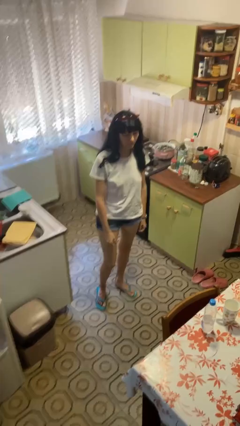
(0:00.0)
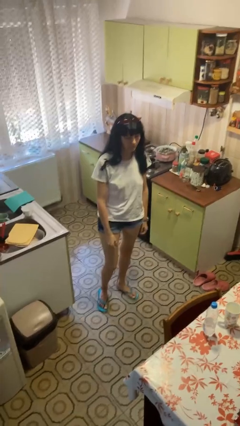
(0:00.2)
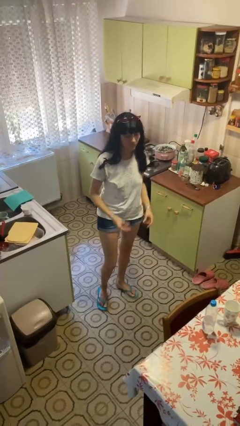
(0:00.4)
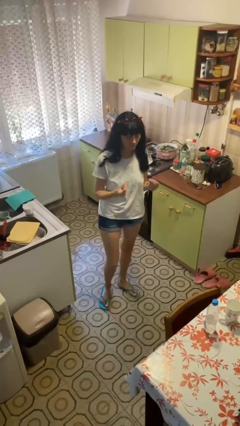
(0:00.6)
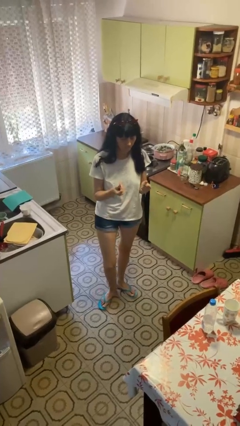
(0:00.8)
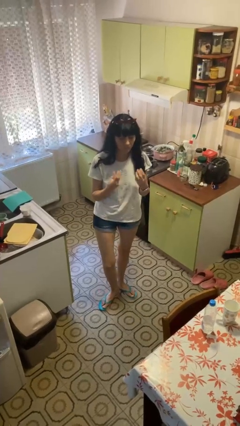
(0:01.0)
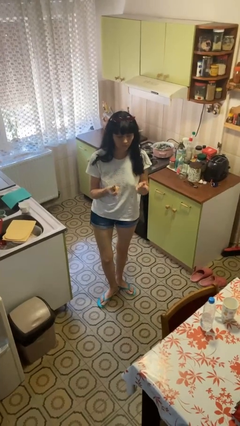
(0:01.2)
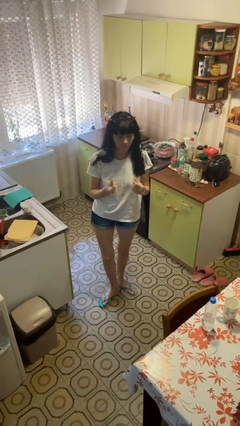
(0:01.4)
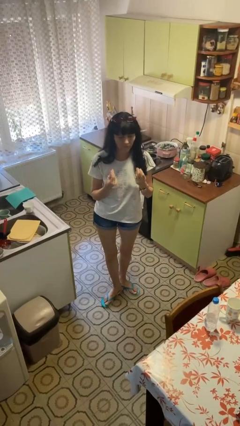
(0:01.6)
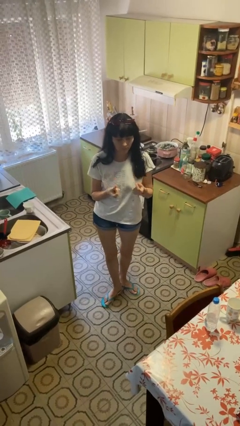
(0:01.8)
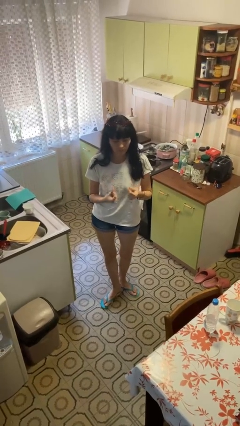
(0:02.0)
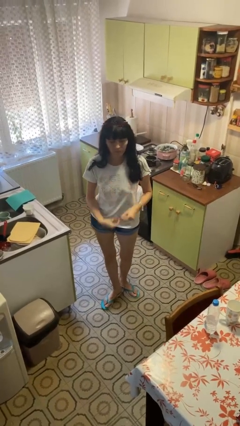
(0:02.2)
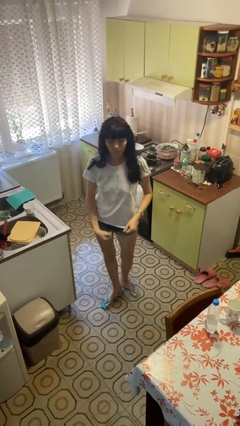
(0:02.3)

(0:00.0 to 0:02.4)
person snaps fingers

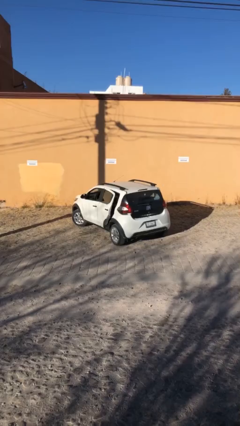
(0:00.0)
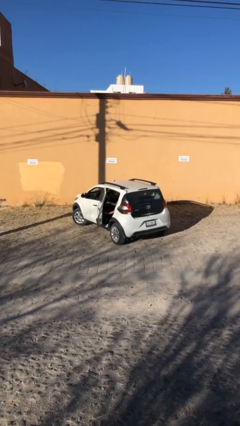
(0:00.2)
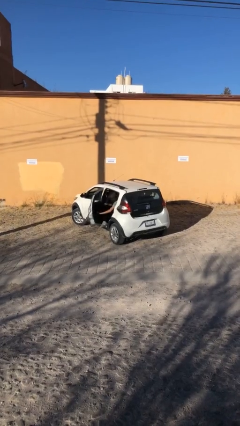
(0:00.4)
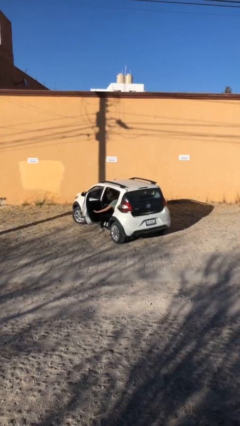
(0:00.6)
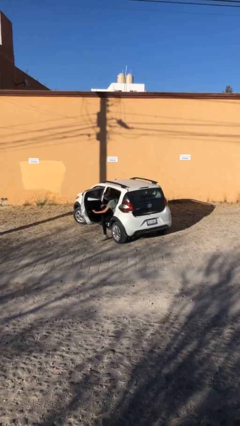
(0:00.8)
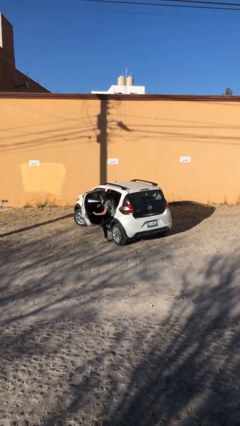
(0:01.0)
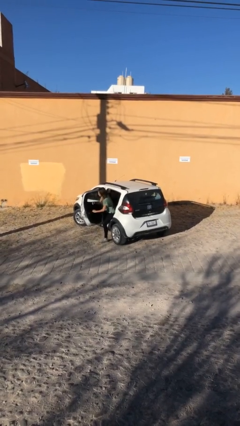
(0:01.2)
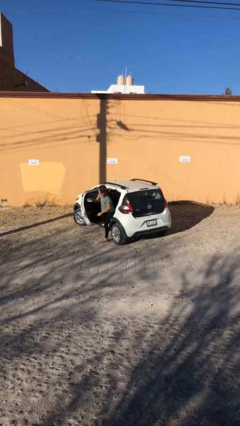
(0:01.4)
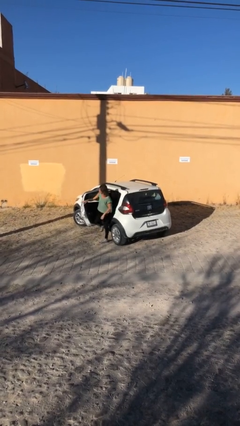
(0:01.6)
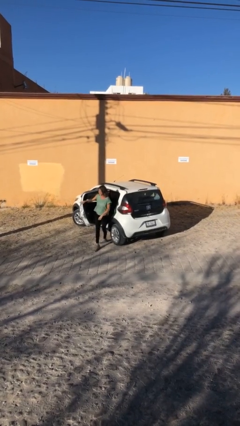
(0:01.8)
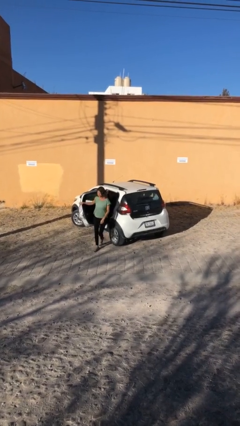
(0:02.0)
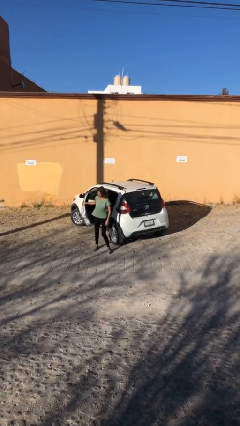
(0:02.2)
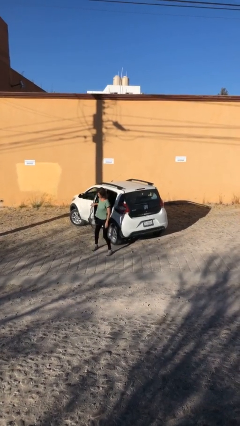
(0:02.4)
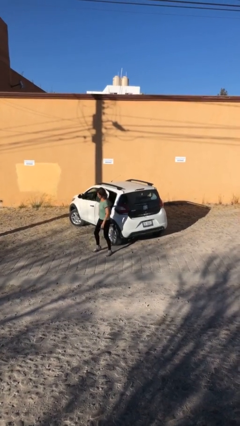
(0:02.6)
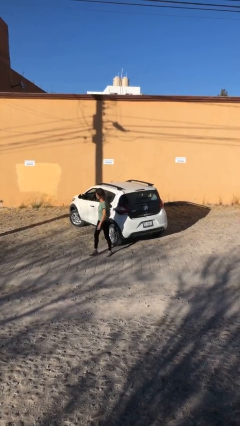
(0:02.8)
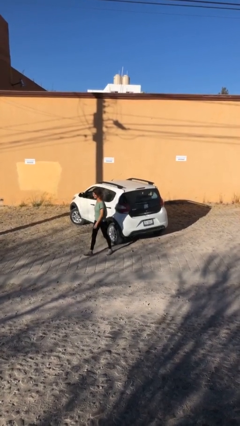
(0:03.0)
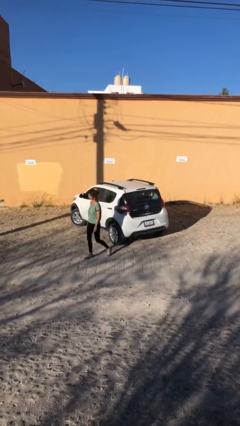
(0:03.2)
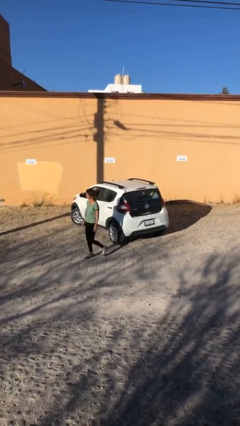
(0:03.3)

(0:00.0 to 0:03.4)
car drops off person

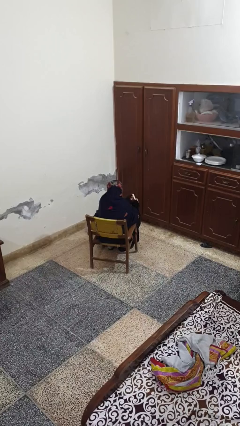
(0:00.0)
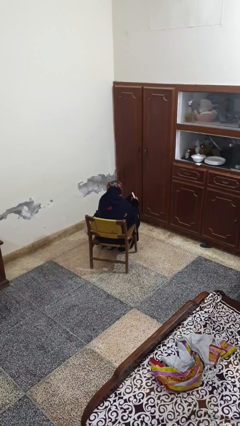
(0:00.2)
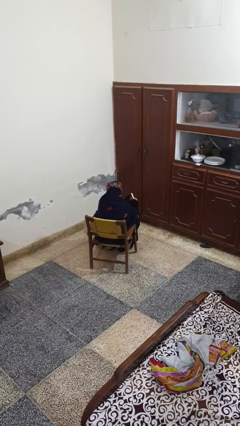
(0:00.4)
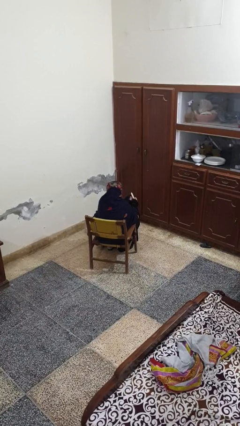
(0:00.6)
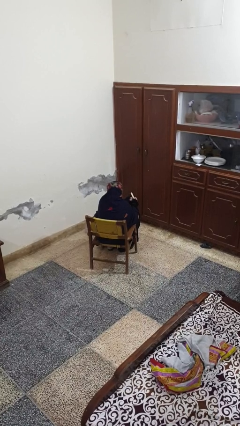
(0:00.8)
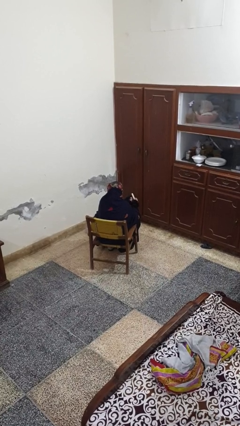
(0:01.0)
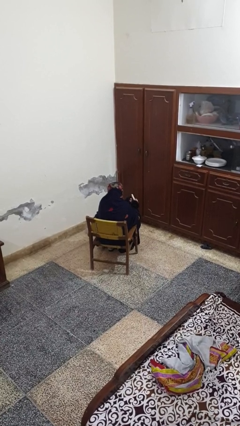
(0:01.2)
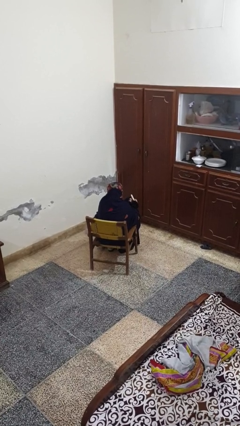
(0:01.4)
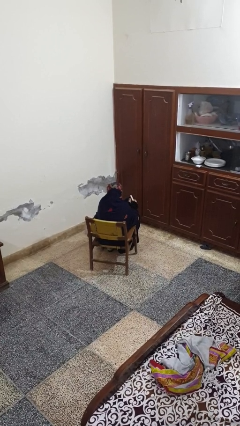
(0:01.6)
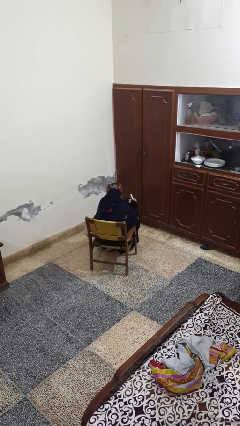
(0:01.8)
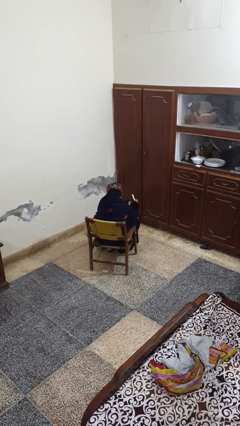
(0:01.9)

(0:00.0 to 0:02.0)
person files fingernails

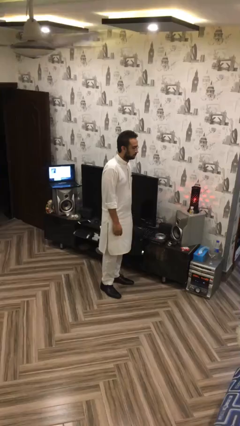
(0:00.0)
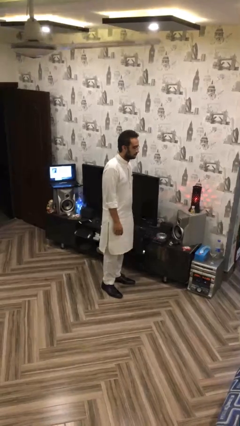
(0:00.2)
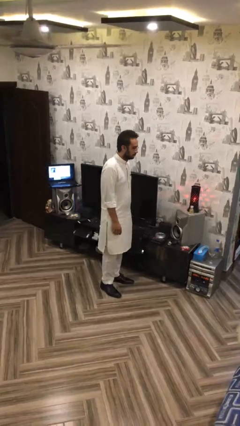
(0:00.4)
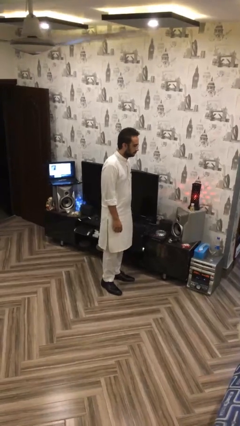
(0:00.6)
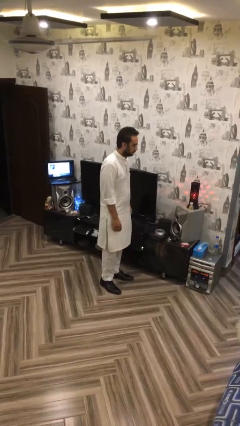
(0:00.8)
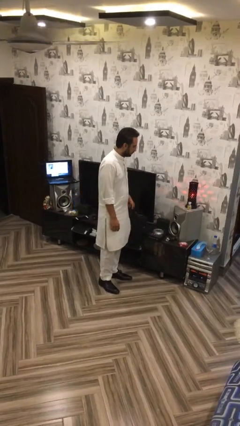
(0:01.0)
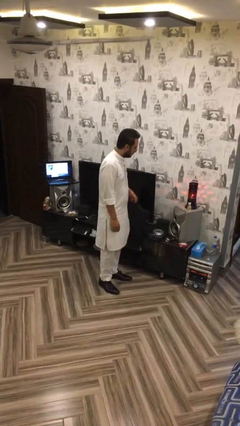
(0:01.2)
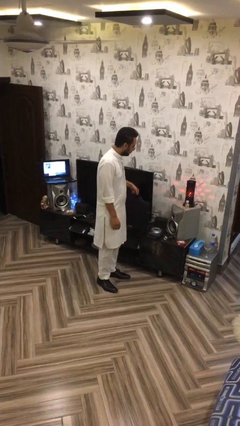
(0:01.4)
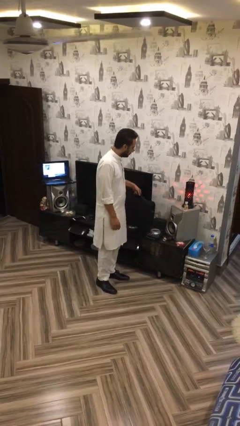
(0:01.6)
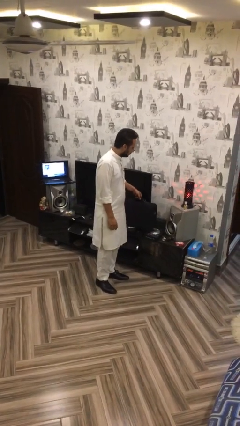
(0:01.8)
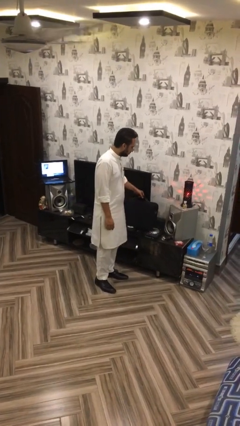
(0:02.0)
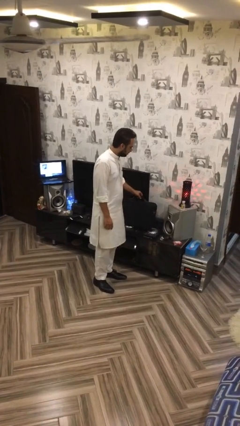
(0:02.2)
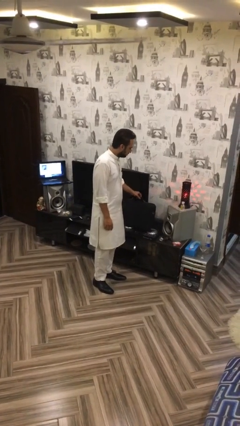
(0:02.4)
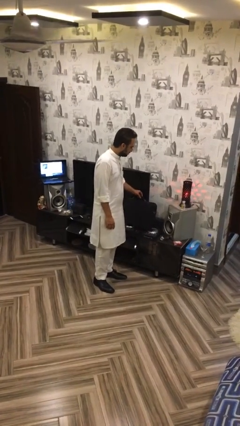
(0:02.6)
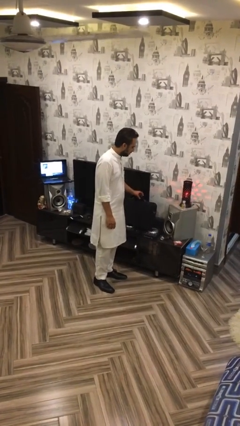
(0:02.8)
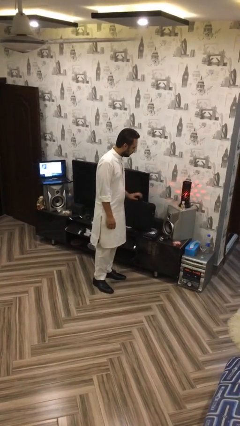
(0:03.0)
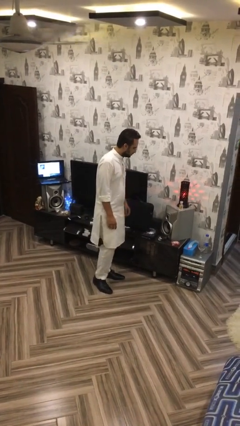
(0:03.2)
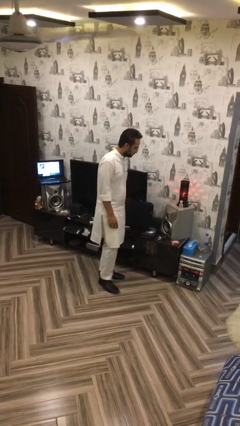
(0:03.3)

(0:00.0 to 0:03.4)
person puts down object on table

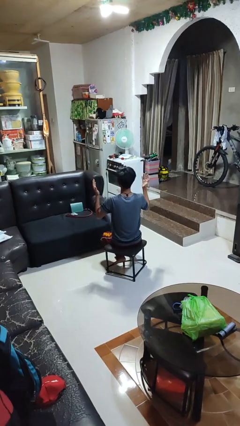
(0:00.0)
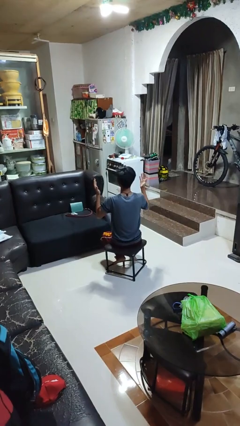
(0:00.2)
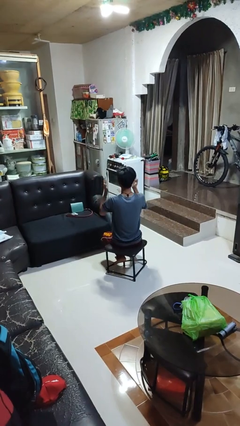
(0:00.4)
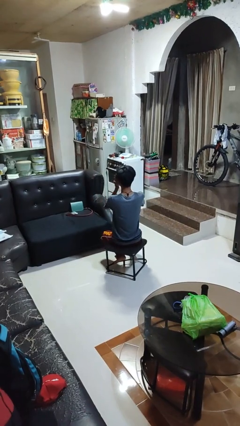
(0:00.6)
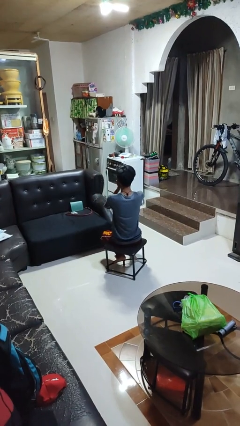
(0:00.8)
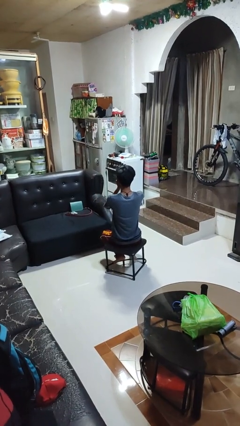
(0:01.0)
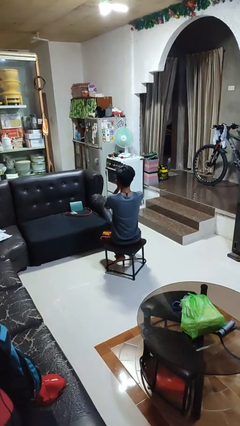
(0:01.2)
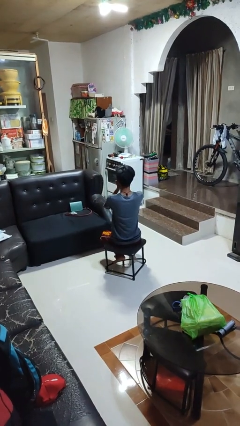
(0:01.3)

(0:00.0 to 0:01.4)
person covers face with hands

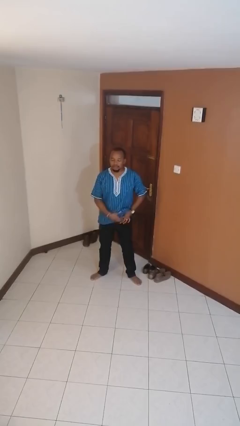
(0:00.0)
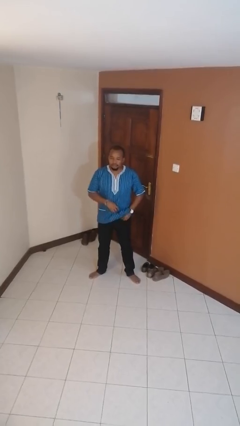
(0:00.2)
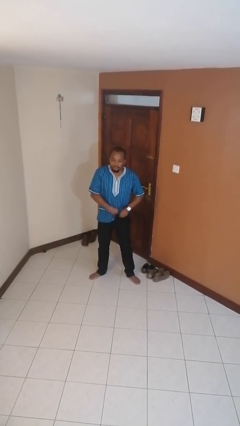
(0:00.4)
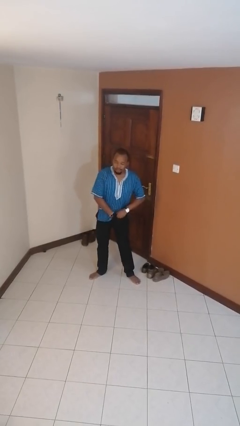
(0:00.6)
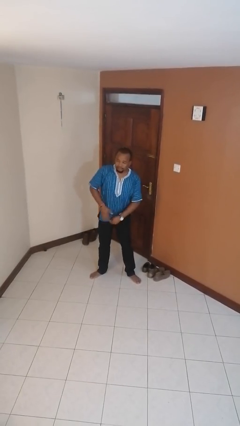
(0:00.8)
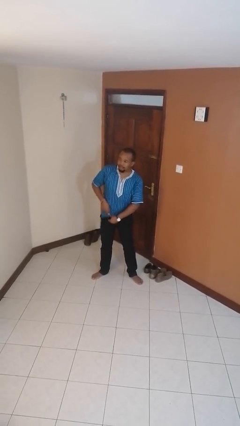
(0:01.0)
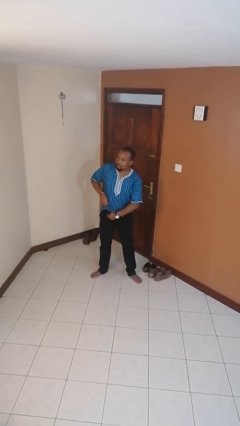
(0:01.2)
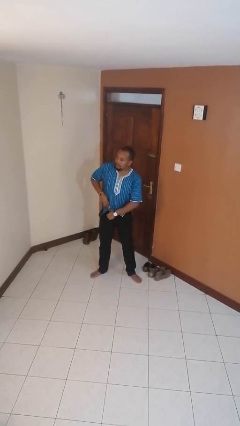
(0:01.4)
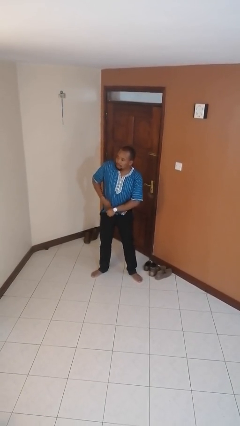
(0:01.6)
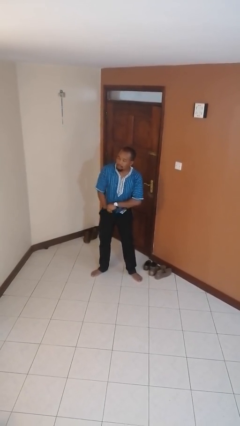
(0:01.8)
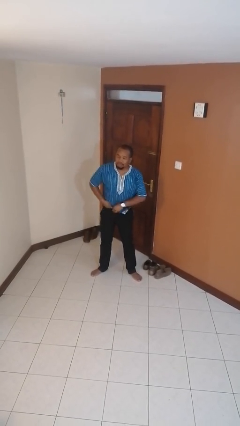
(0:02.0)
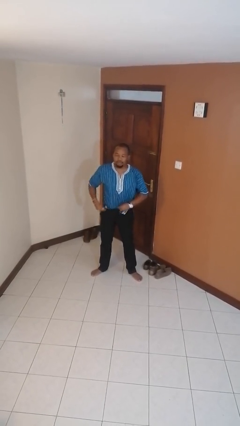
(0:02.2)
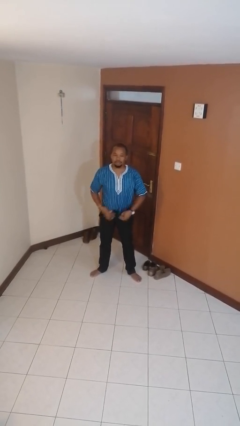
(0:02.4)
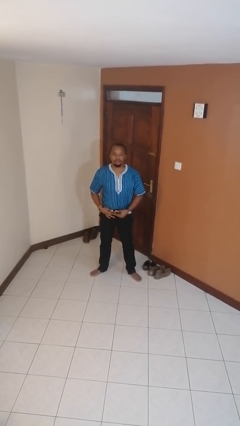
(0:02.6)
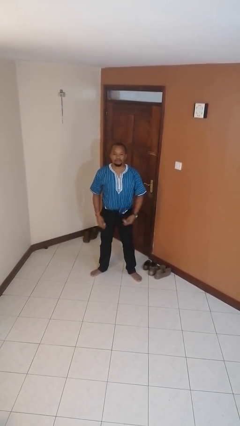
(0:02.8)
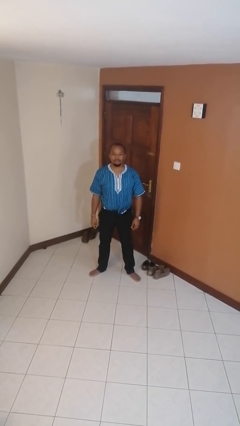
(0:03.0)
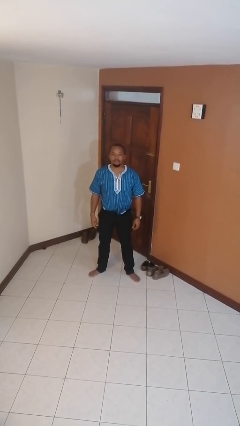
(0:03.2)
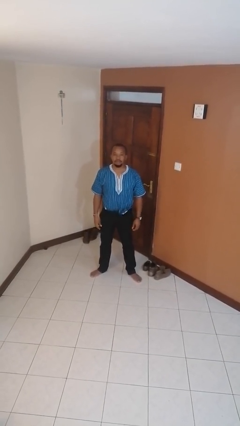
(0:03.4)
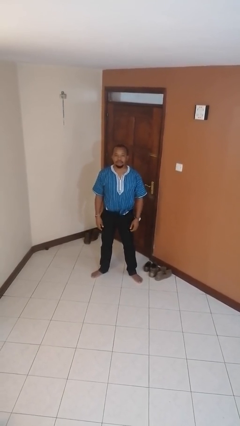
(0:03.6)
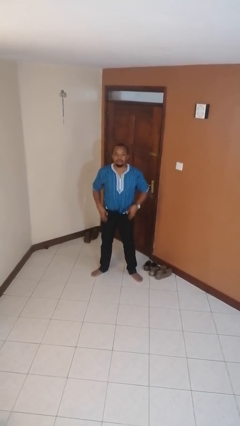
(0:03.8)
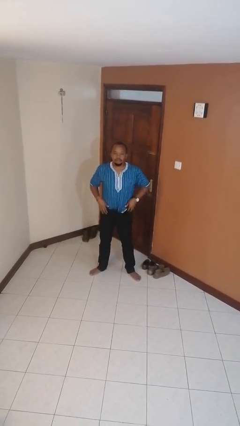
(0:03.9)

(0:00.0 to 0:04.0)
person tucks in shirt

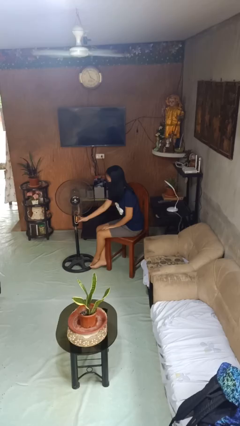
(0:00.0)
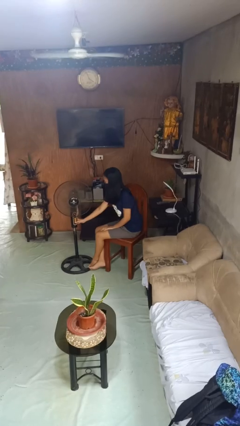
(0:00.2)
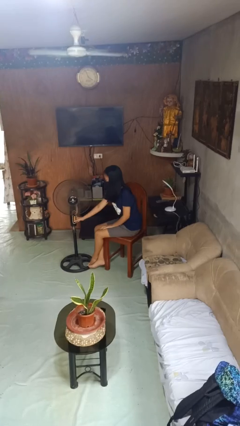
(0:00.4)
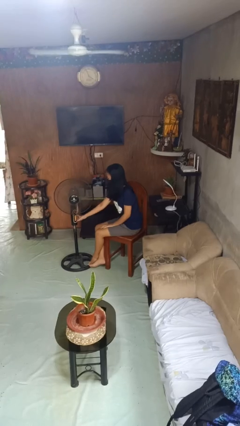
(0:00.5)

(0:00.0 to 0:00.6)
person turns off fan
